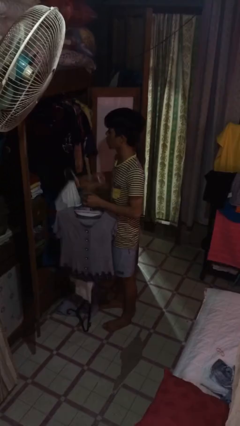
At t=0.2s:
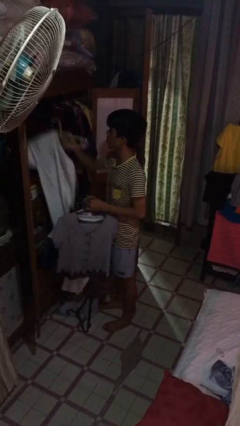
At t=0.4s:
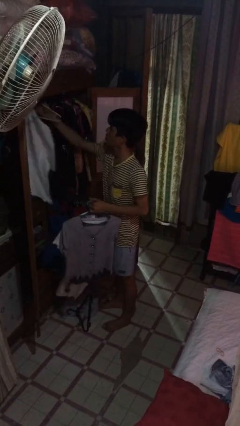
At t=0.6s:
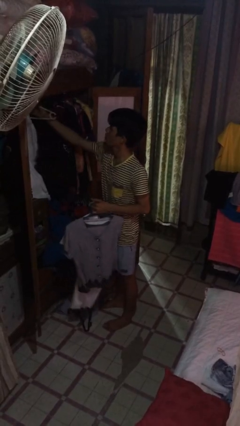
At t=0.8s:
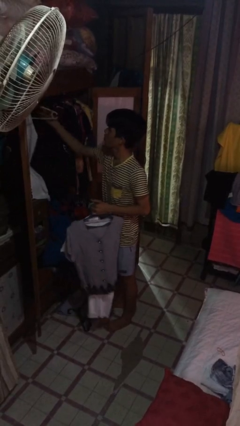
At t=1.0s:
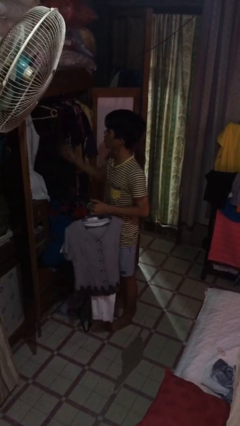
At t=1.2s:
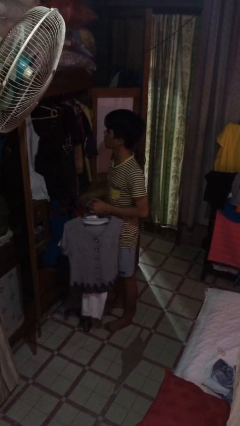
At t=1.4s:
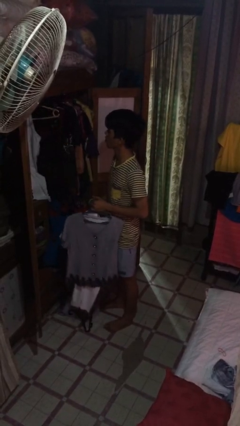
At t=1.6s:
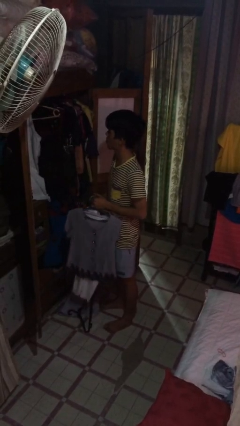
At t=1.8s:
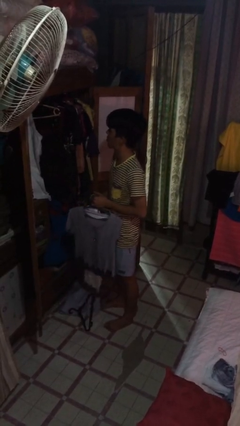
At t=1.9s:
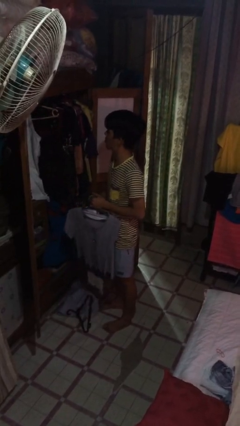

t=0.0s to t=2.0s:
person puts clothes into closet

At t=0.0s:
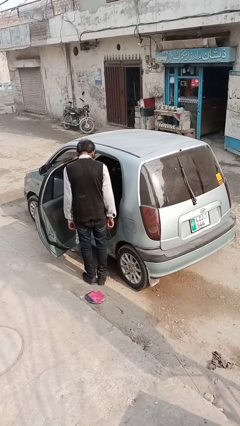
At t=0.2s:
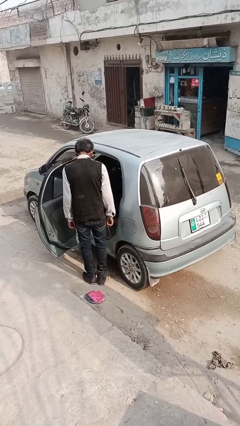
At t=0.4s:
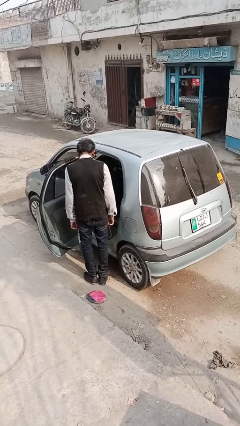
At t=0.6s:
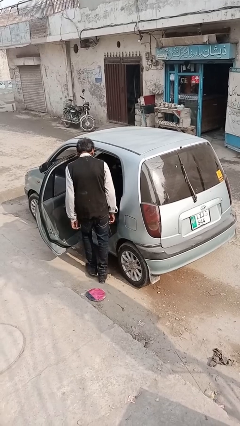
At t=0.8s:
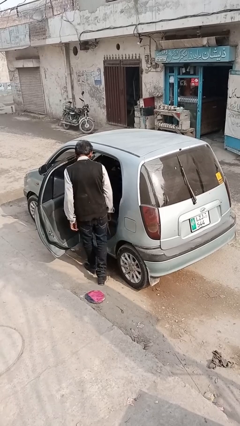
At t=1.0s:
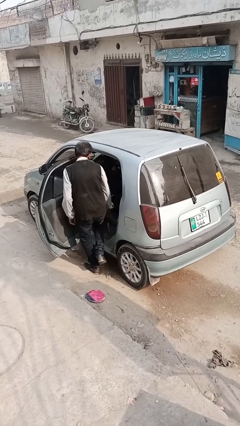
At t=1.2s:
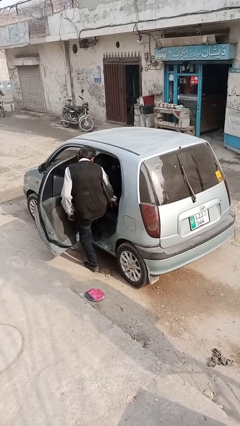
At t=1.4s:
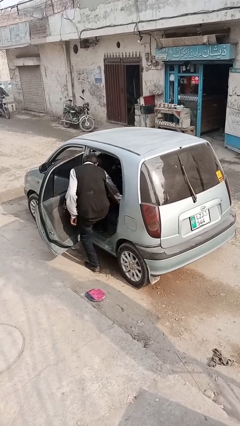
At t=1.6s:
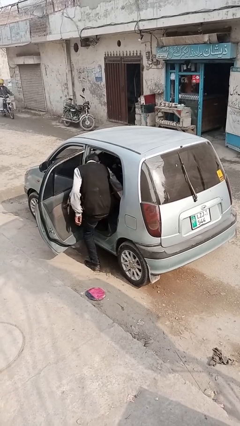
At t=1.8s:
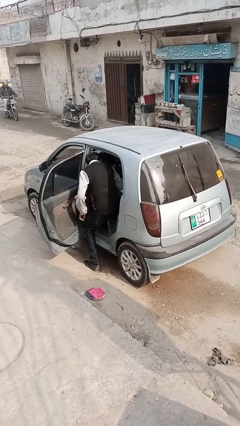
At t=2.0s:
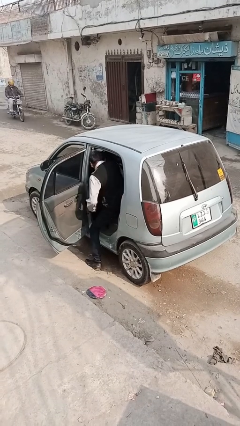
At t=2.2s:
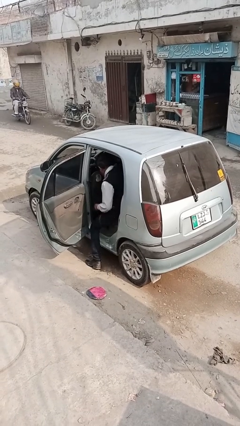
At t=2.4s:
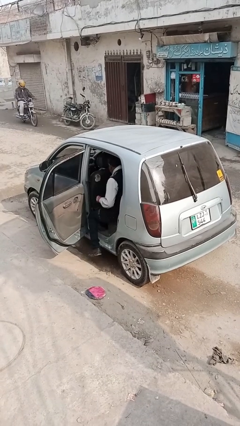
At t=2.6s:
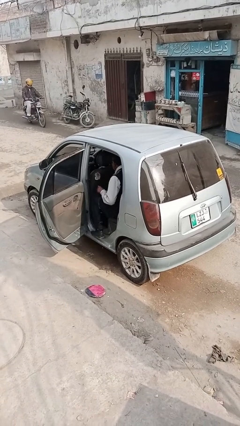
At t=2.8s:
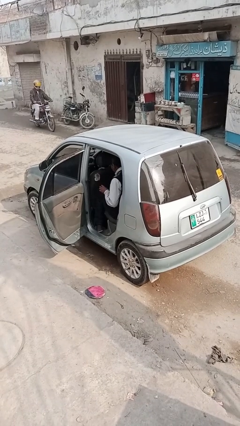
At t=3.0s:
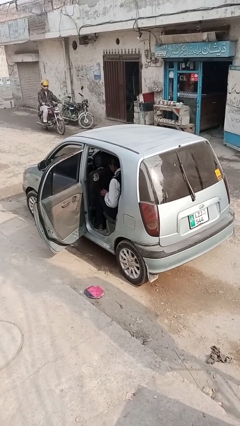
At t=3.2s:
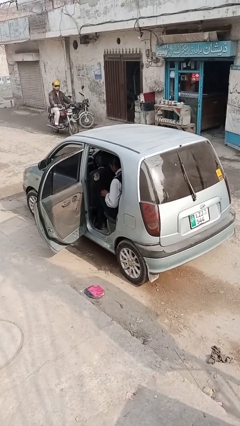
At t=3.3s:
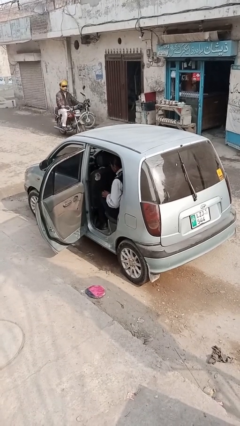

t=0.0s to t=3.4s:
person enters car

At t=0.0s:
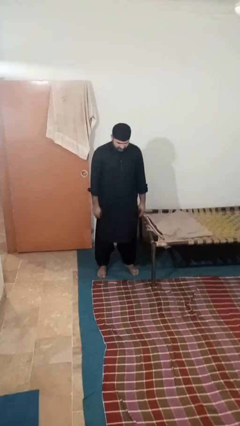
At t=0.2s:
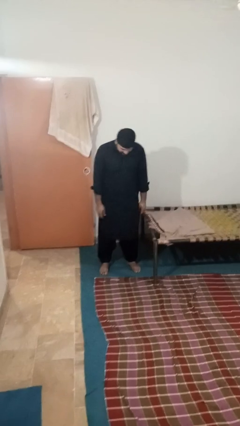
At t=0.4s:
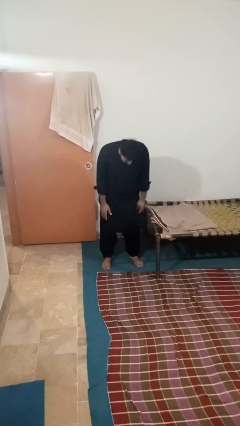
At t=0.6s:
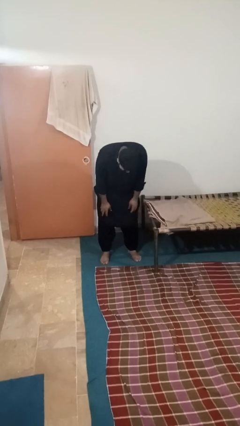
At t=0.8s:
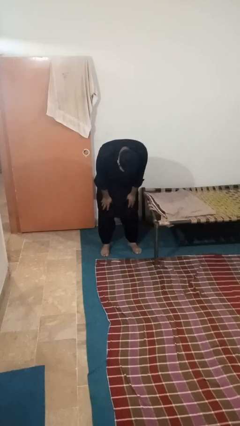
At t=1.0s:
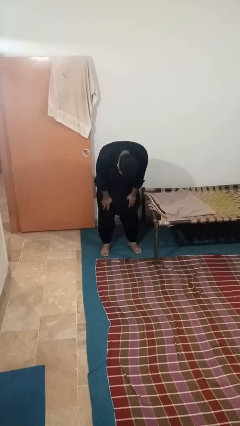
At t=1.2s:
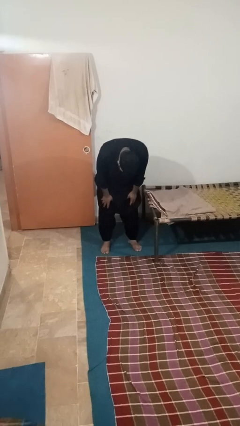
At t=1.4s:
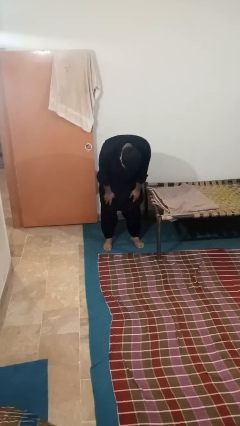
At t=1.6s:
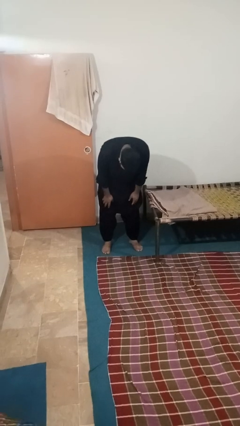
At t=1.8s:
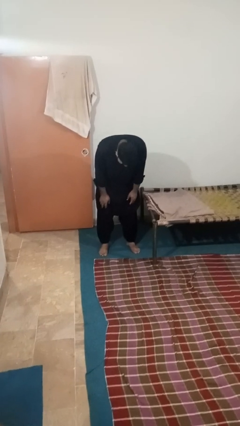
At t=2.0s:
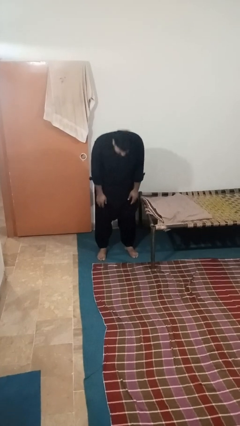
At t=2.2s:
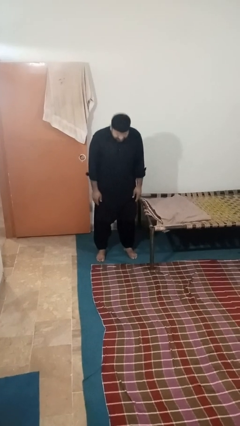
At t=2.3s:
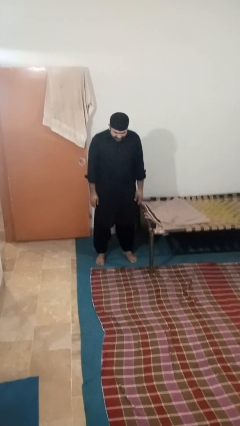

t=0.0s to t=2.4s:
person bows

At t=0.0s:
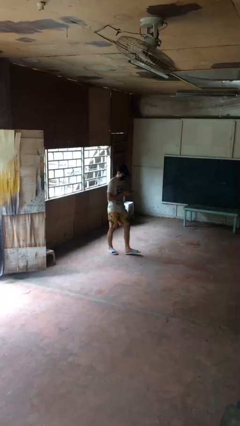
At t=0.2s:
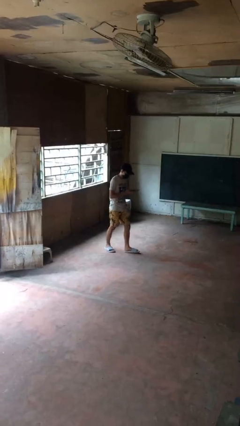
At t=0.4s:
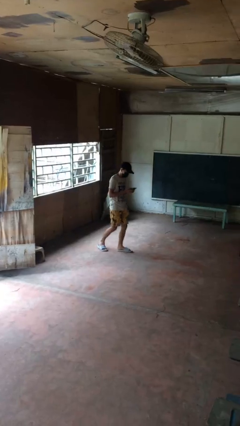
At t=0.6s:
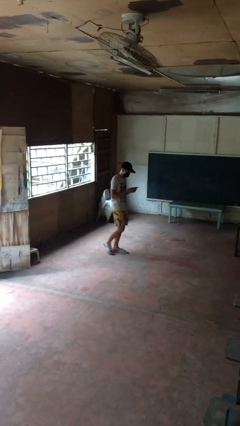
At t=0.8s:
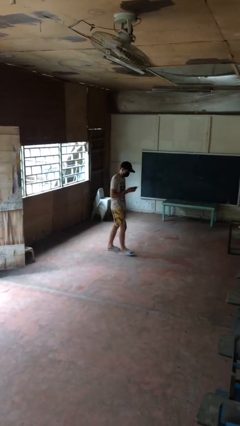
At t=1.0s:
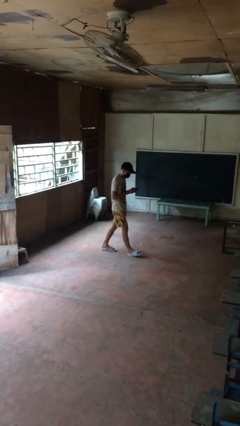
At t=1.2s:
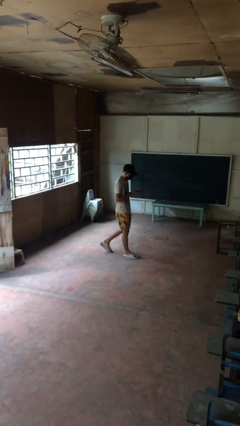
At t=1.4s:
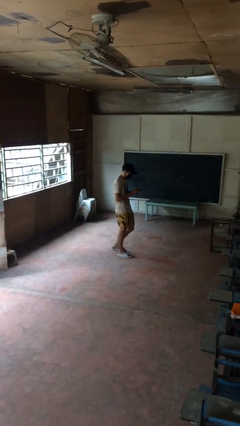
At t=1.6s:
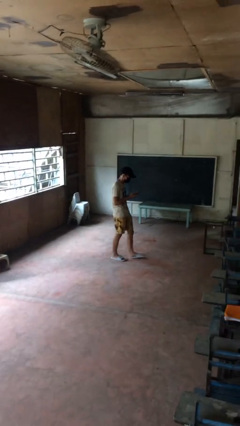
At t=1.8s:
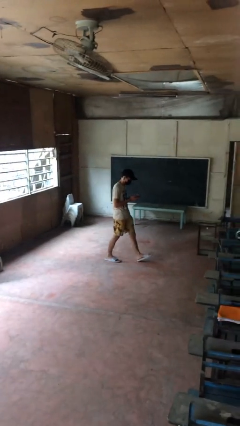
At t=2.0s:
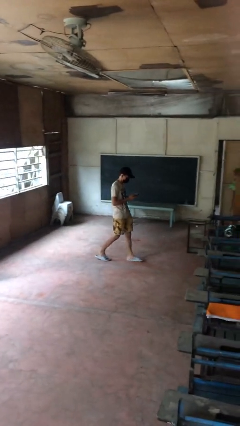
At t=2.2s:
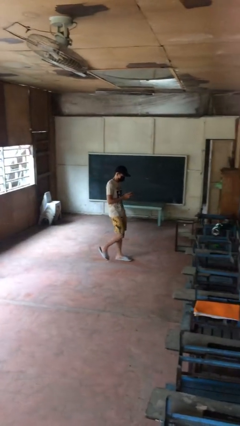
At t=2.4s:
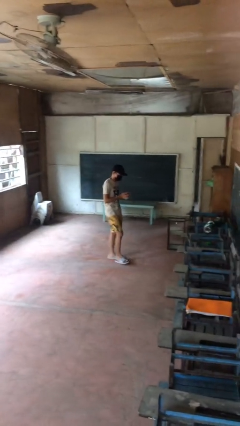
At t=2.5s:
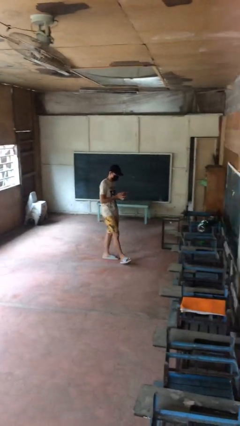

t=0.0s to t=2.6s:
person texts on phone

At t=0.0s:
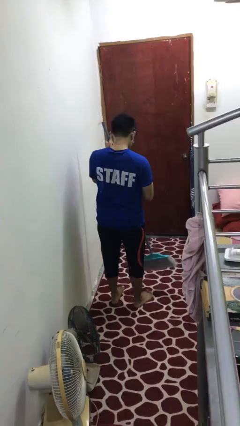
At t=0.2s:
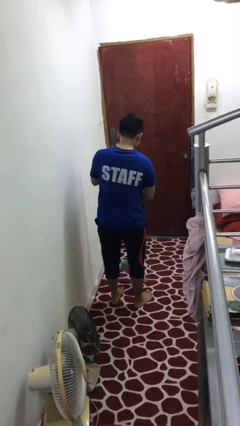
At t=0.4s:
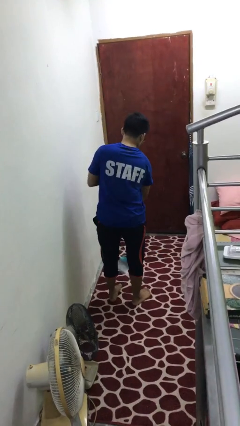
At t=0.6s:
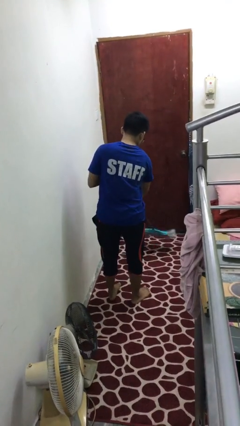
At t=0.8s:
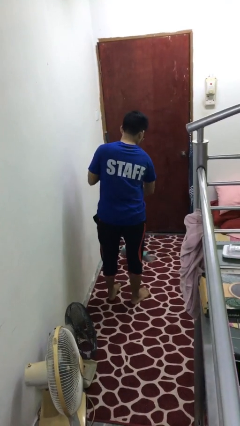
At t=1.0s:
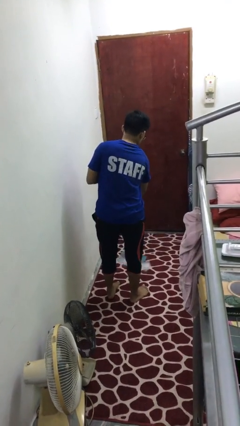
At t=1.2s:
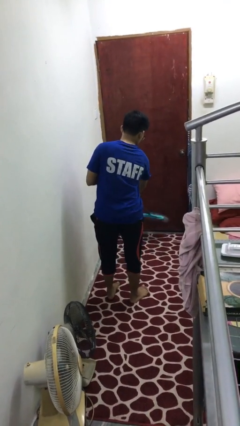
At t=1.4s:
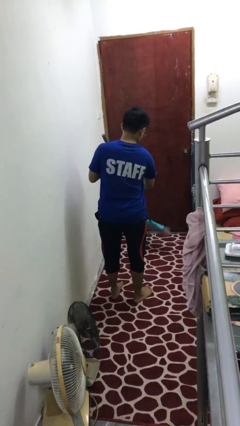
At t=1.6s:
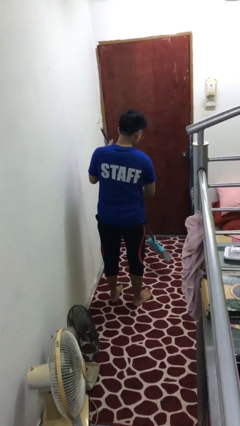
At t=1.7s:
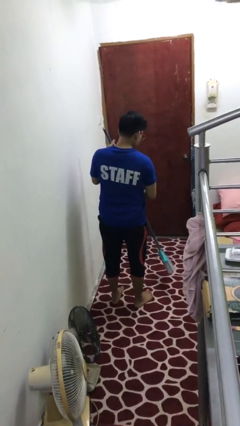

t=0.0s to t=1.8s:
person sweeps floor

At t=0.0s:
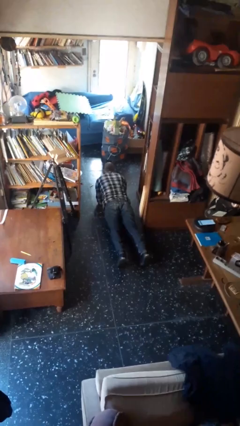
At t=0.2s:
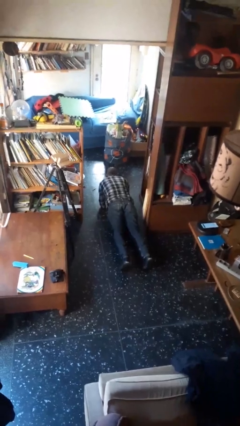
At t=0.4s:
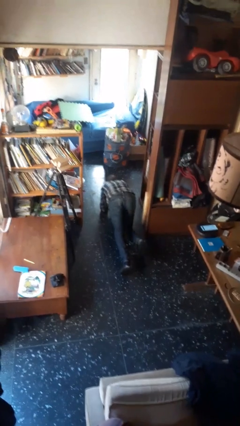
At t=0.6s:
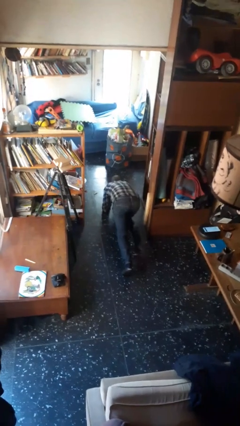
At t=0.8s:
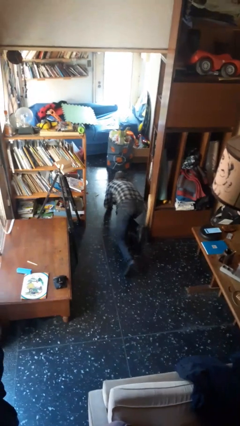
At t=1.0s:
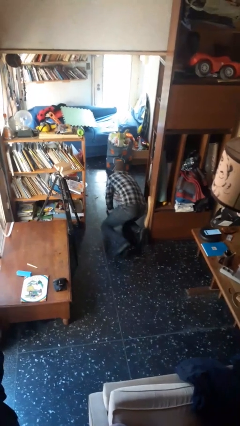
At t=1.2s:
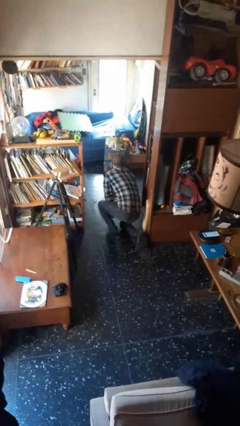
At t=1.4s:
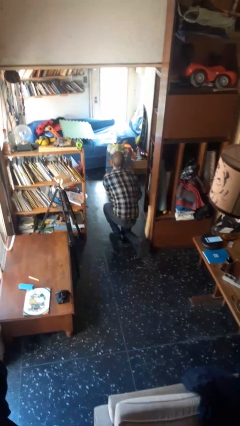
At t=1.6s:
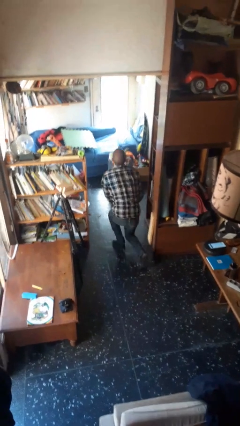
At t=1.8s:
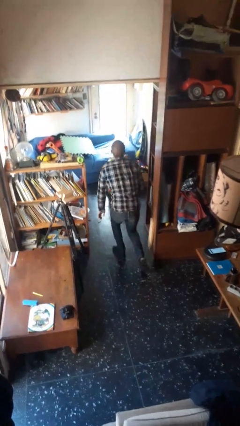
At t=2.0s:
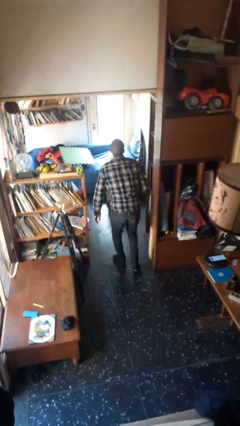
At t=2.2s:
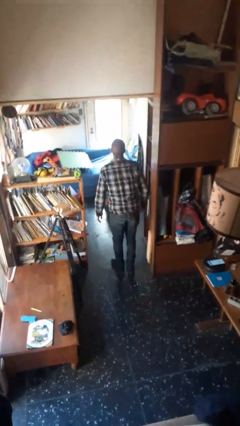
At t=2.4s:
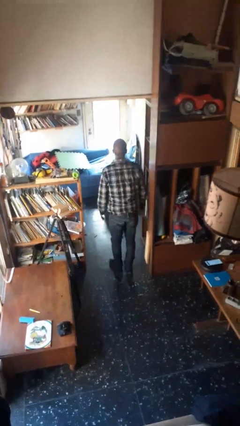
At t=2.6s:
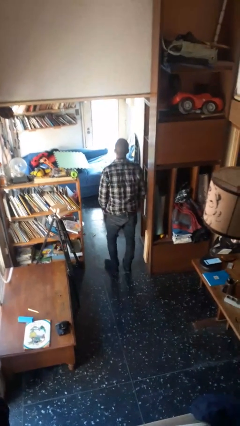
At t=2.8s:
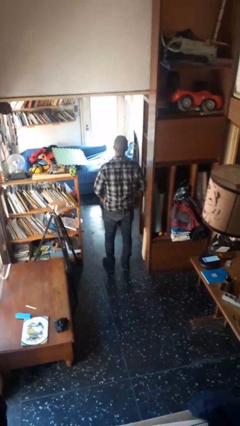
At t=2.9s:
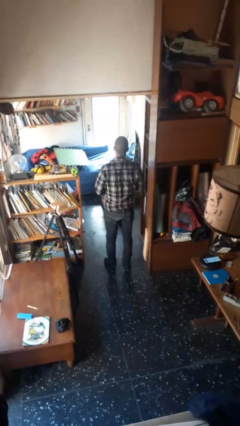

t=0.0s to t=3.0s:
person stands up from floor

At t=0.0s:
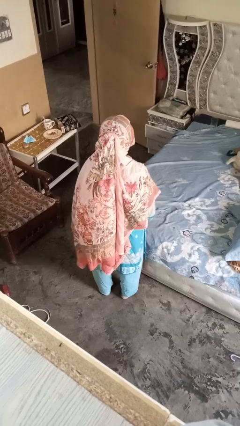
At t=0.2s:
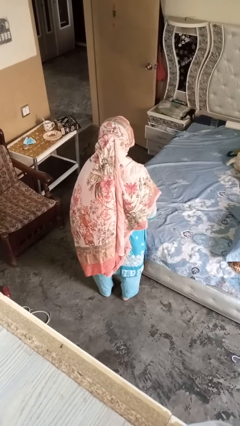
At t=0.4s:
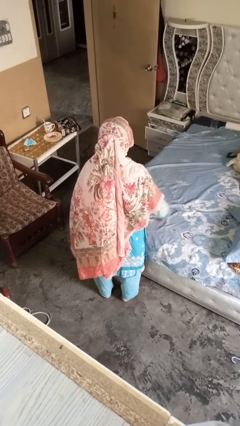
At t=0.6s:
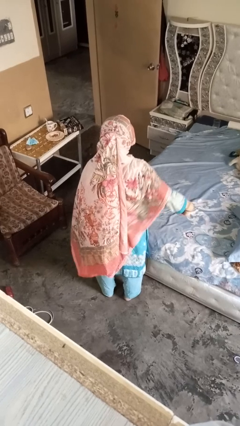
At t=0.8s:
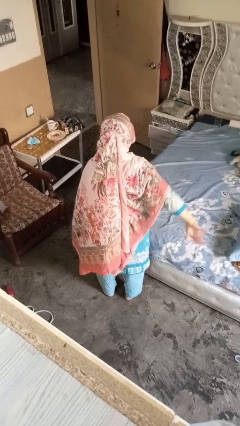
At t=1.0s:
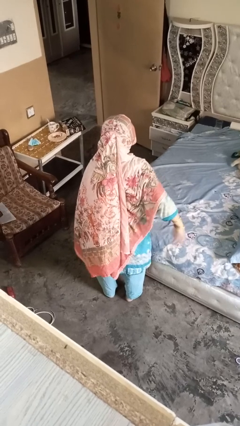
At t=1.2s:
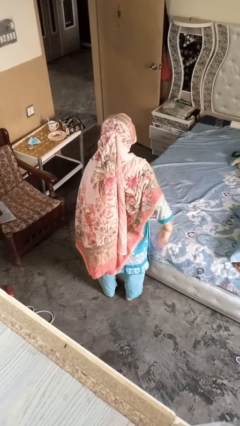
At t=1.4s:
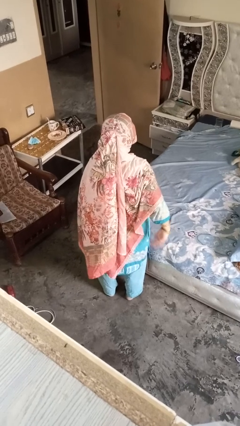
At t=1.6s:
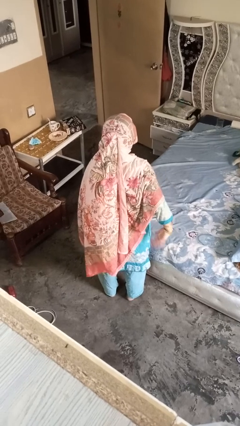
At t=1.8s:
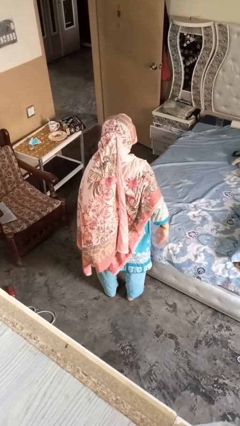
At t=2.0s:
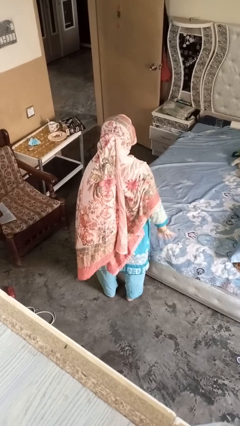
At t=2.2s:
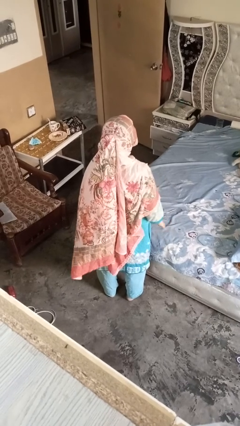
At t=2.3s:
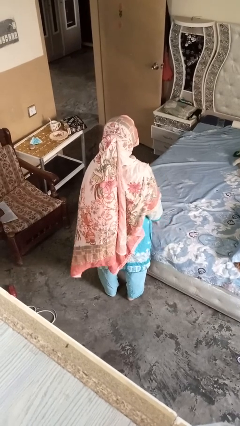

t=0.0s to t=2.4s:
person gestures behind me
